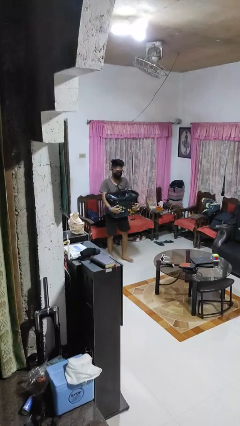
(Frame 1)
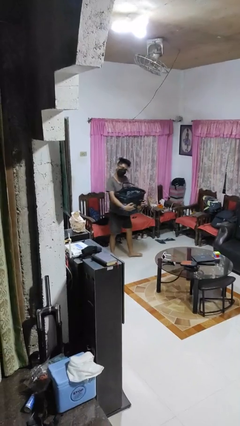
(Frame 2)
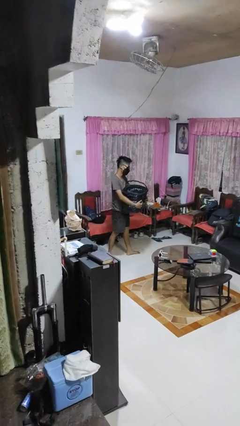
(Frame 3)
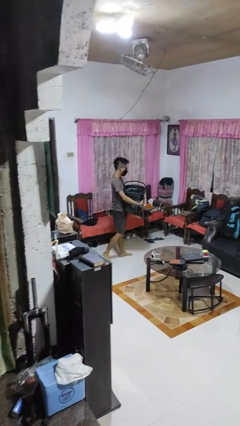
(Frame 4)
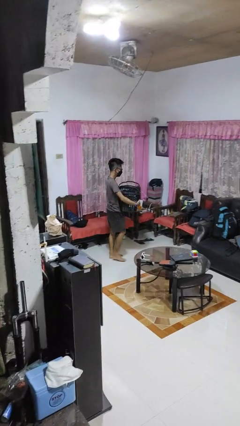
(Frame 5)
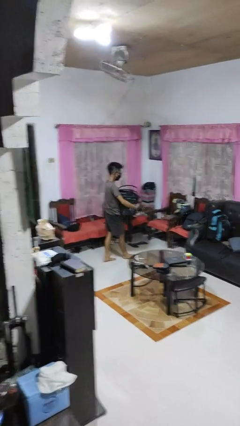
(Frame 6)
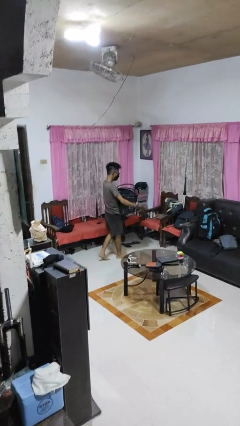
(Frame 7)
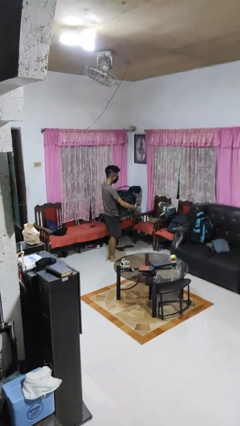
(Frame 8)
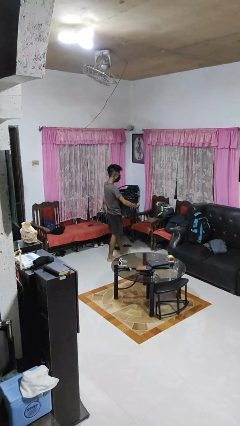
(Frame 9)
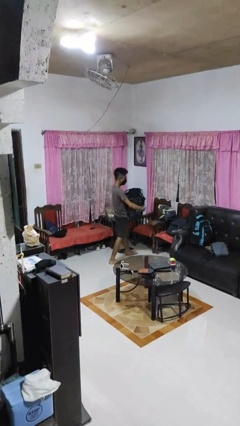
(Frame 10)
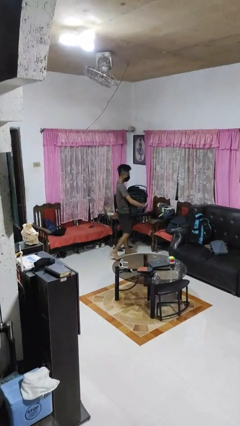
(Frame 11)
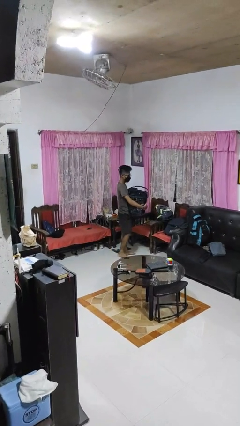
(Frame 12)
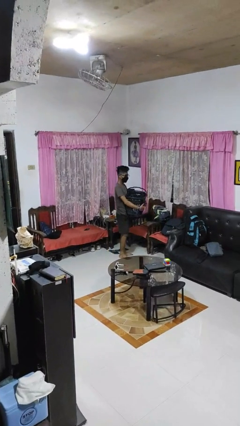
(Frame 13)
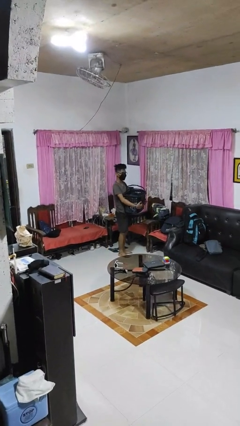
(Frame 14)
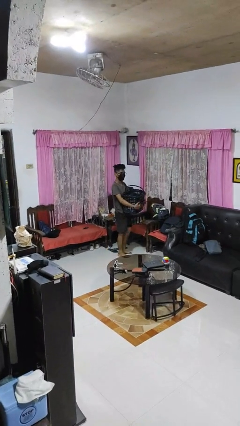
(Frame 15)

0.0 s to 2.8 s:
person carries laundry basket

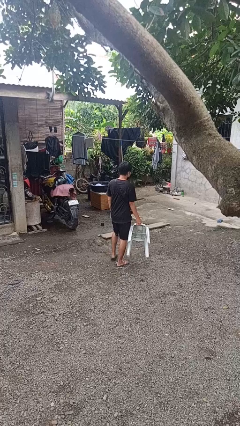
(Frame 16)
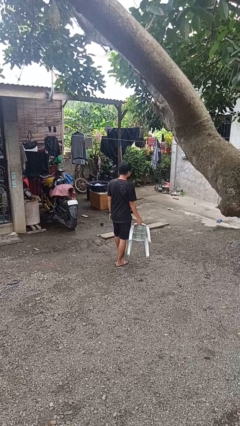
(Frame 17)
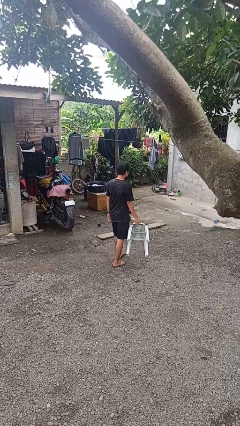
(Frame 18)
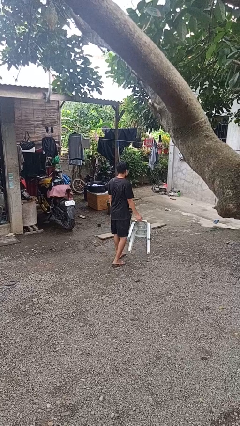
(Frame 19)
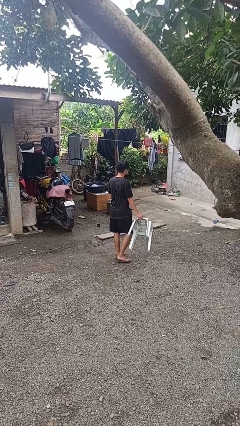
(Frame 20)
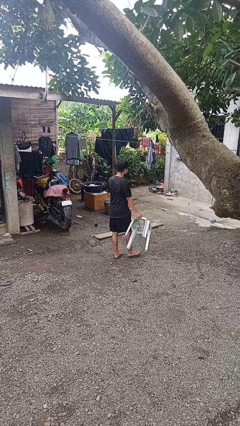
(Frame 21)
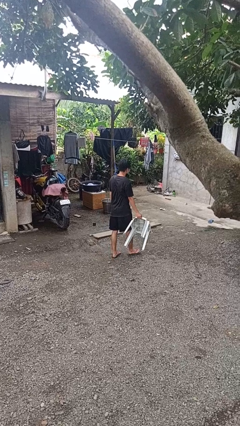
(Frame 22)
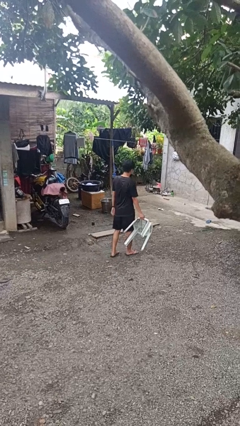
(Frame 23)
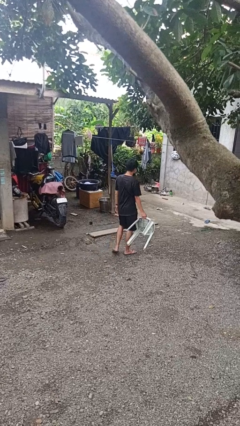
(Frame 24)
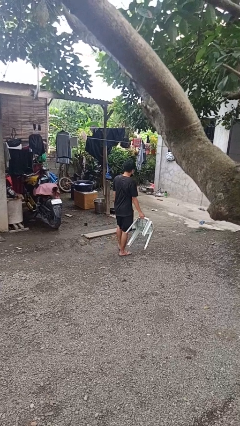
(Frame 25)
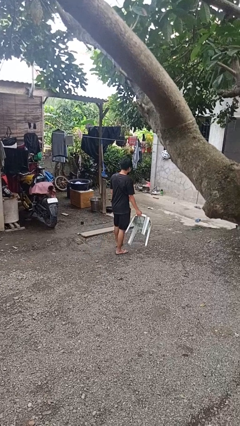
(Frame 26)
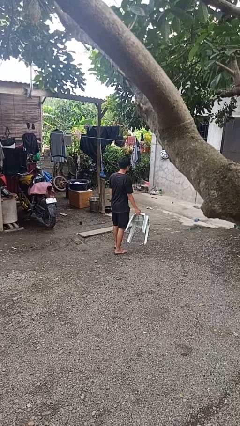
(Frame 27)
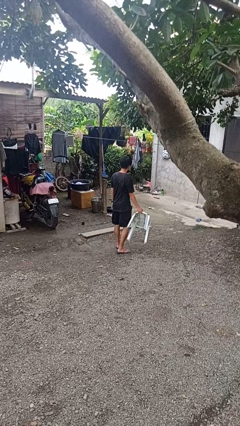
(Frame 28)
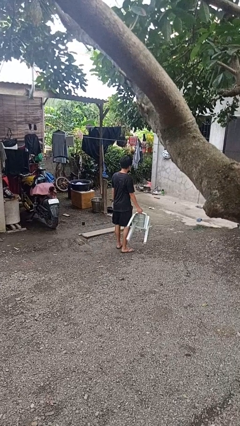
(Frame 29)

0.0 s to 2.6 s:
person carries furniture

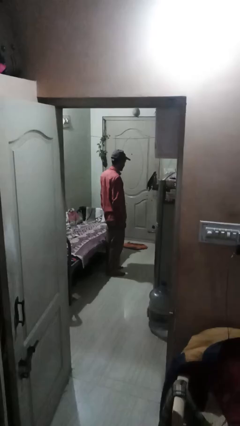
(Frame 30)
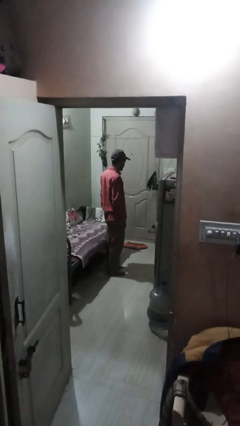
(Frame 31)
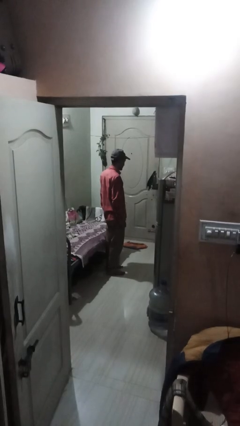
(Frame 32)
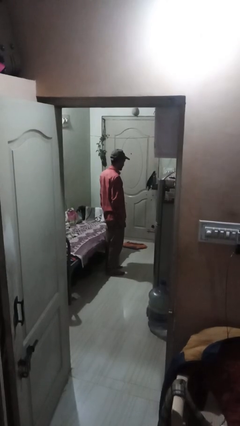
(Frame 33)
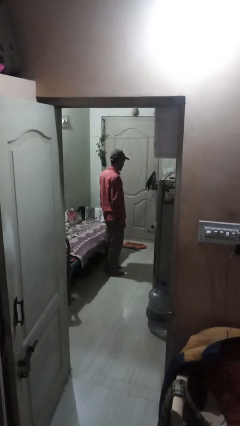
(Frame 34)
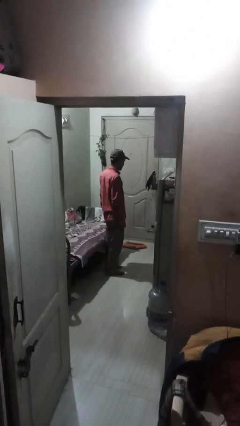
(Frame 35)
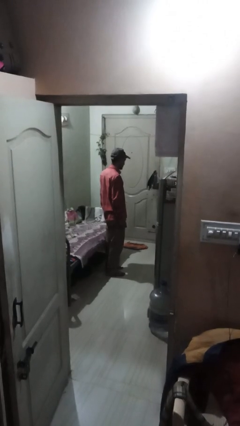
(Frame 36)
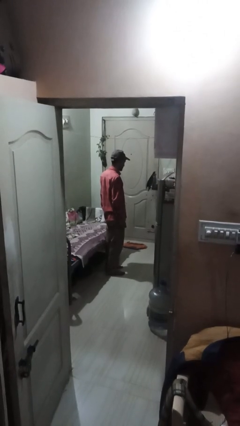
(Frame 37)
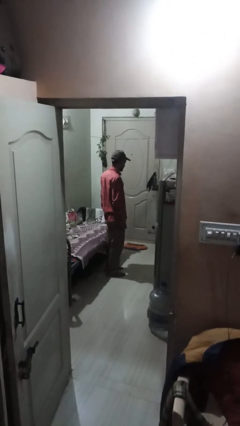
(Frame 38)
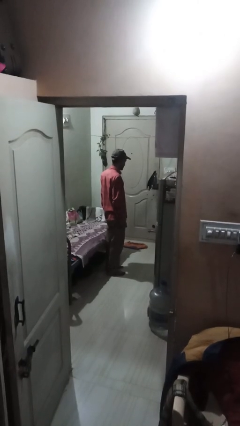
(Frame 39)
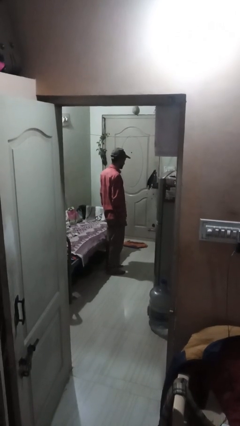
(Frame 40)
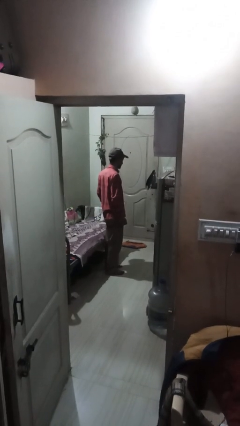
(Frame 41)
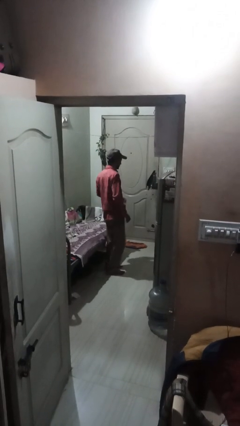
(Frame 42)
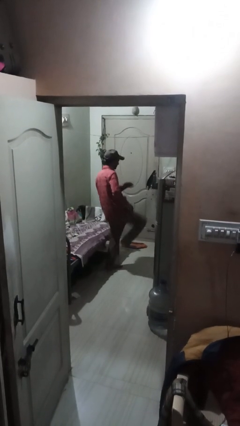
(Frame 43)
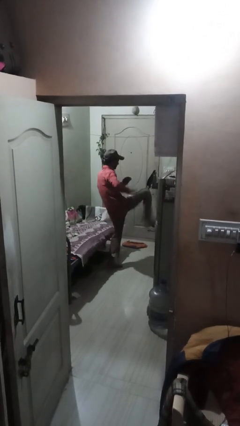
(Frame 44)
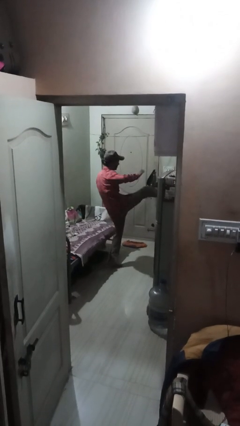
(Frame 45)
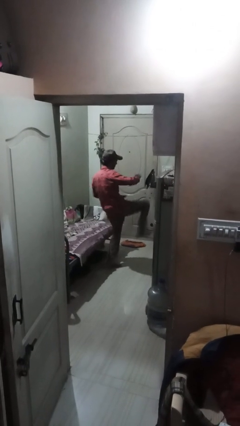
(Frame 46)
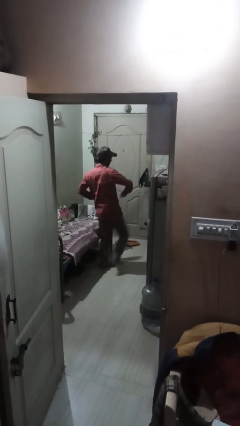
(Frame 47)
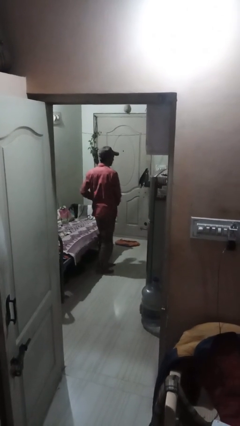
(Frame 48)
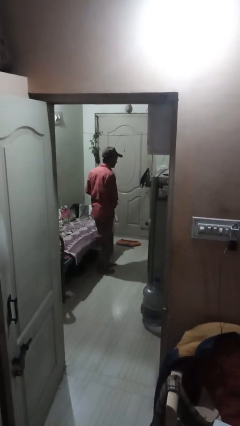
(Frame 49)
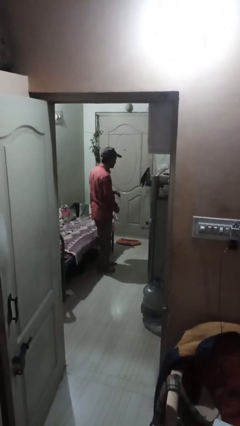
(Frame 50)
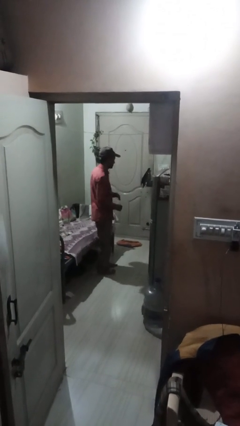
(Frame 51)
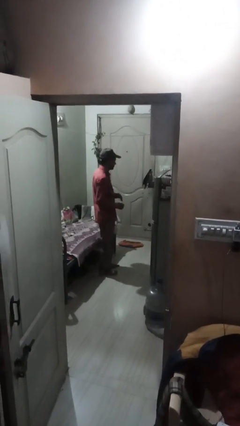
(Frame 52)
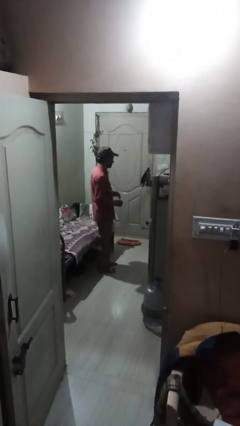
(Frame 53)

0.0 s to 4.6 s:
person karate kicks

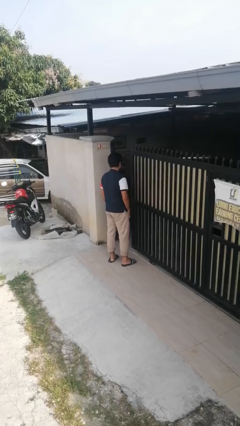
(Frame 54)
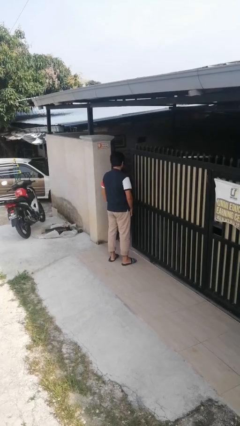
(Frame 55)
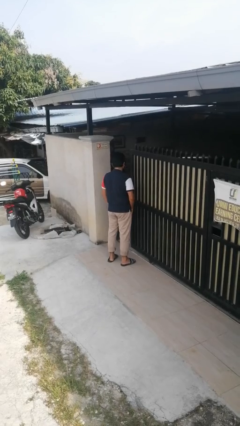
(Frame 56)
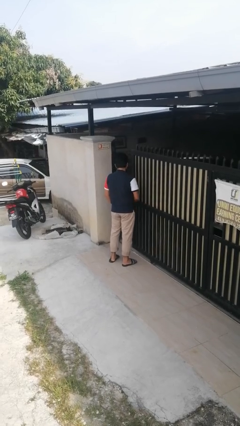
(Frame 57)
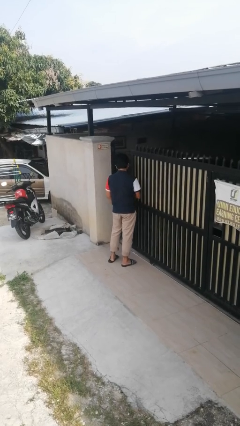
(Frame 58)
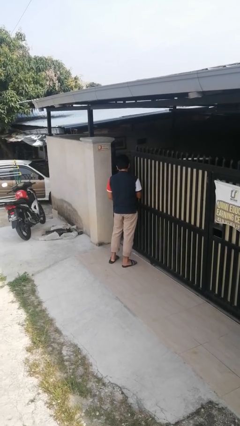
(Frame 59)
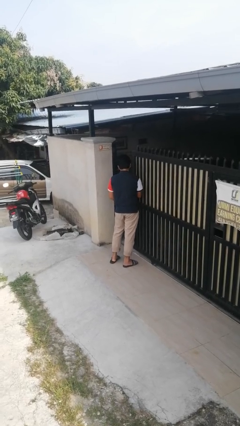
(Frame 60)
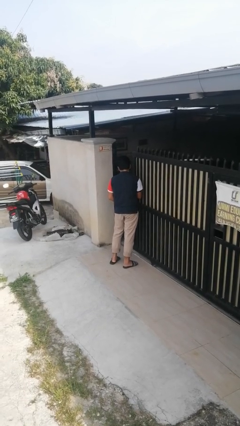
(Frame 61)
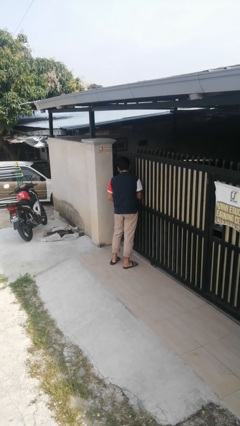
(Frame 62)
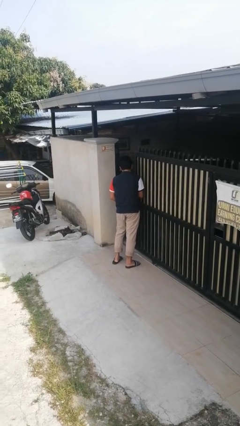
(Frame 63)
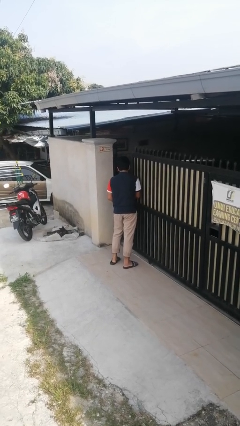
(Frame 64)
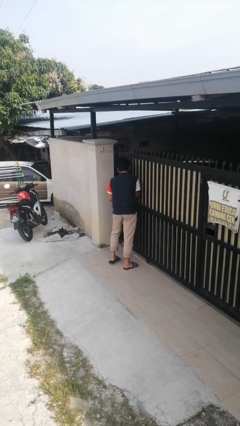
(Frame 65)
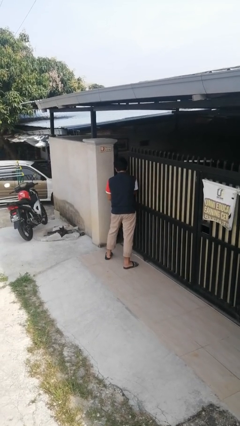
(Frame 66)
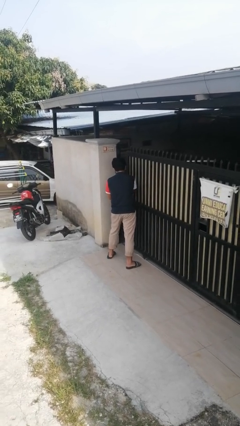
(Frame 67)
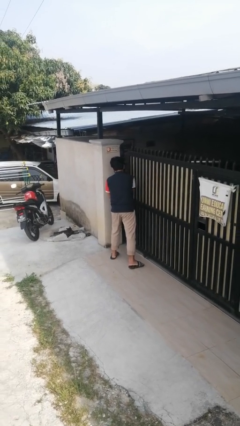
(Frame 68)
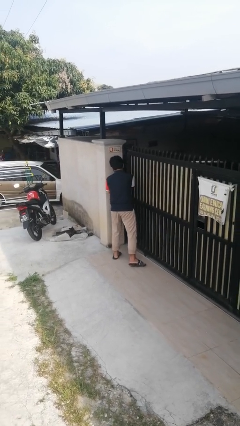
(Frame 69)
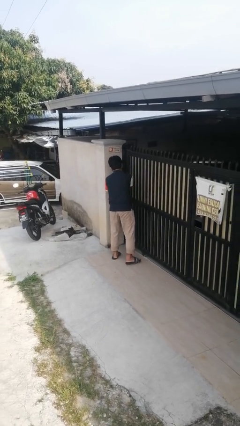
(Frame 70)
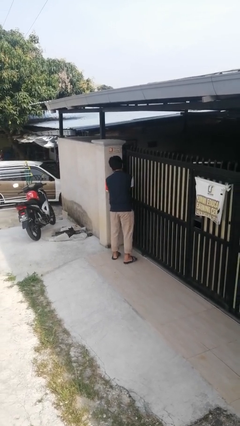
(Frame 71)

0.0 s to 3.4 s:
person closes sliding door

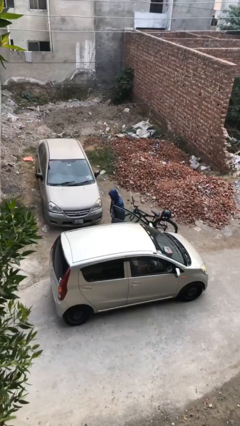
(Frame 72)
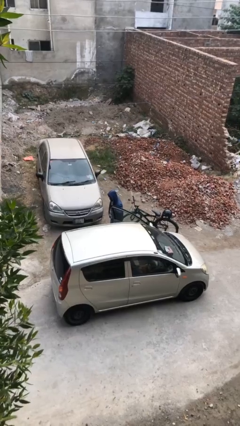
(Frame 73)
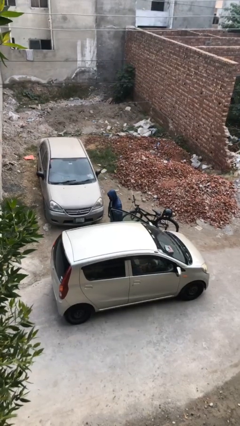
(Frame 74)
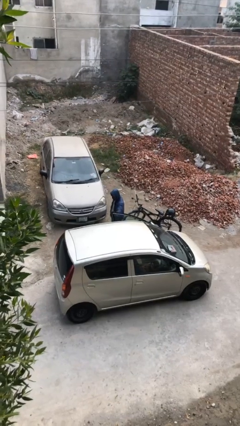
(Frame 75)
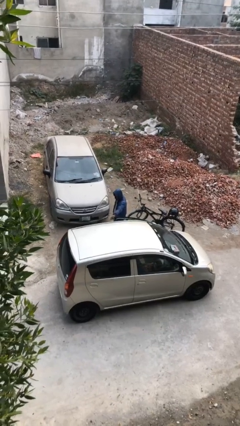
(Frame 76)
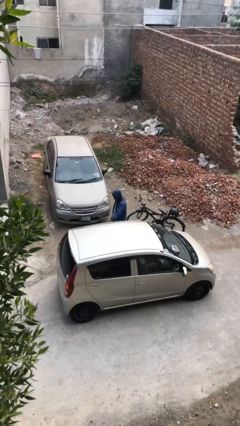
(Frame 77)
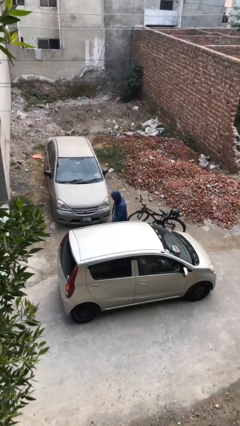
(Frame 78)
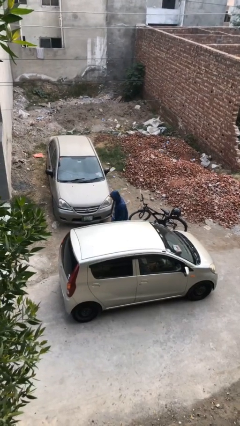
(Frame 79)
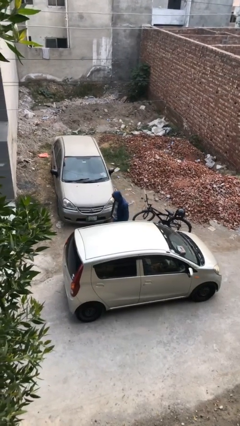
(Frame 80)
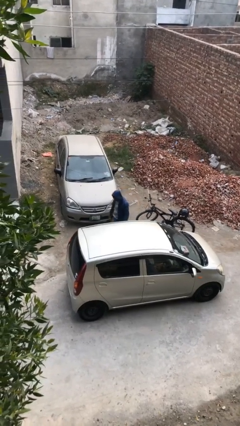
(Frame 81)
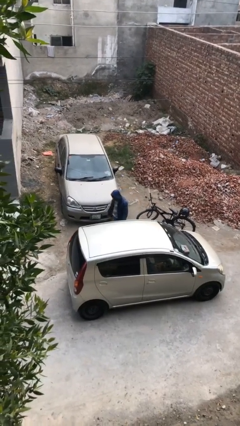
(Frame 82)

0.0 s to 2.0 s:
person closes car door

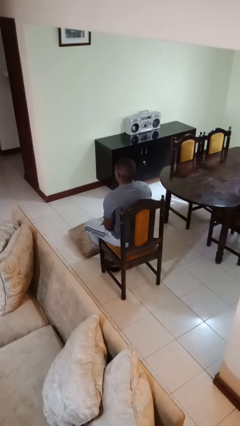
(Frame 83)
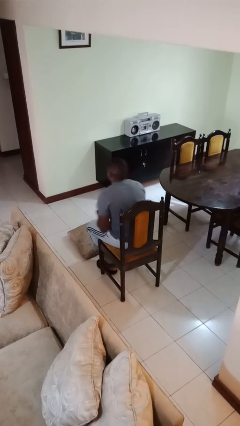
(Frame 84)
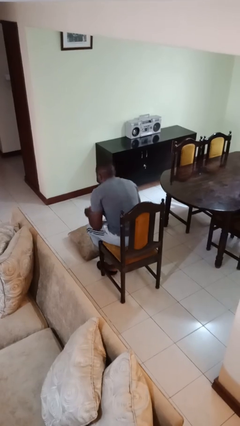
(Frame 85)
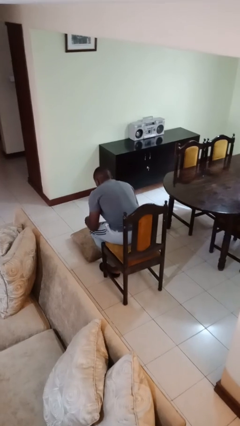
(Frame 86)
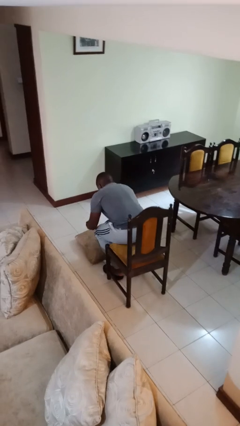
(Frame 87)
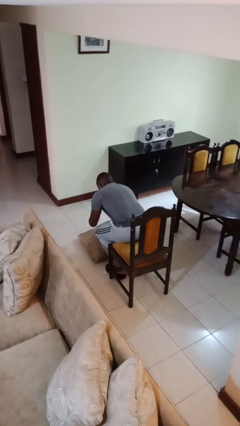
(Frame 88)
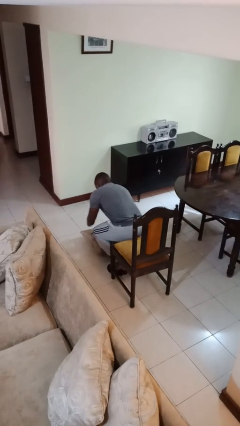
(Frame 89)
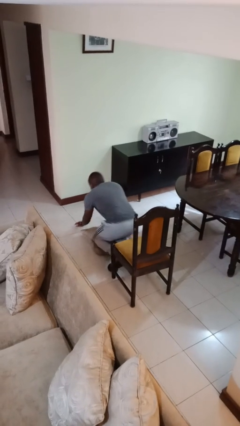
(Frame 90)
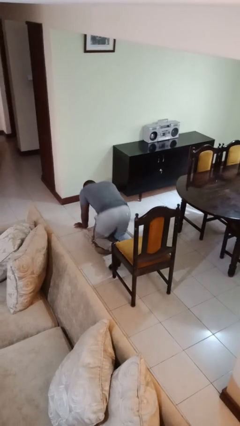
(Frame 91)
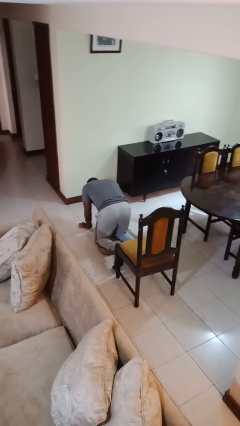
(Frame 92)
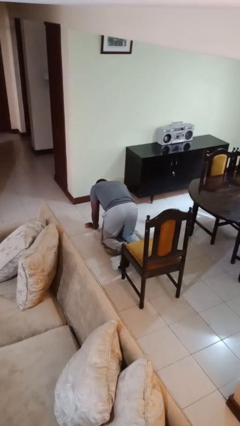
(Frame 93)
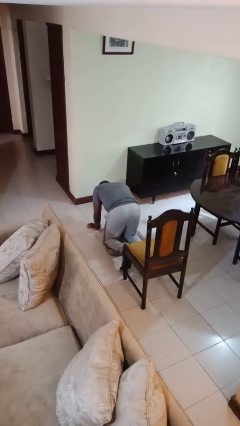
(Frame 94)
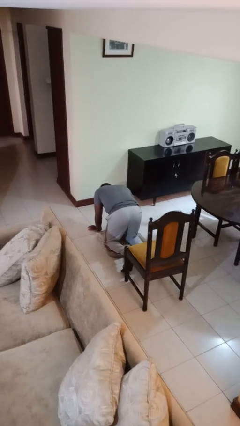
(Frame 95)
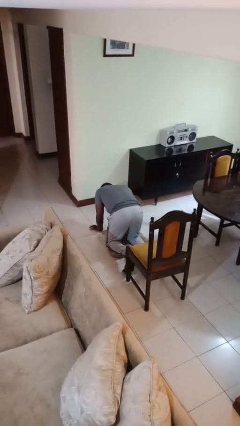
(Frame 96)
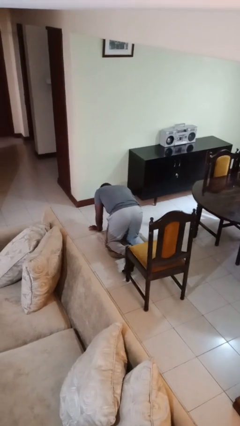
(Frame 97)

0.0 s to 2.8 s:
person falls from chair
